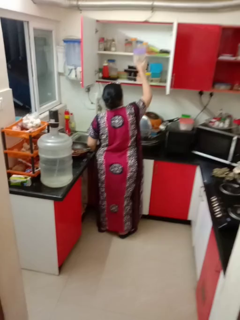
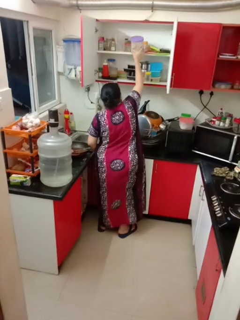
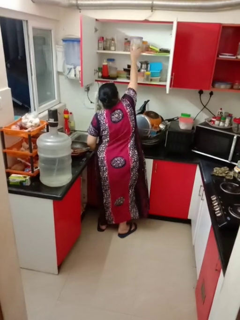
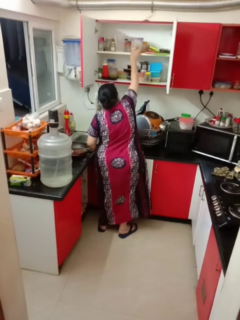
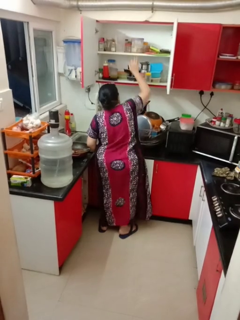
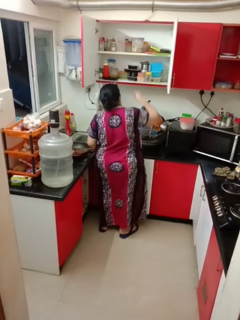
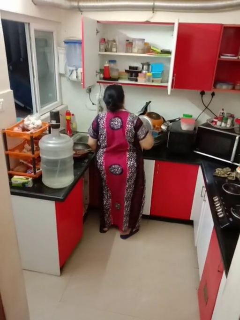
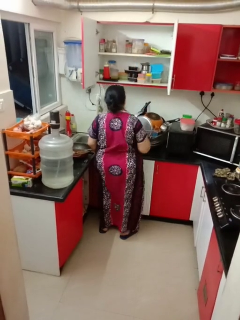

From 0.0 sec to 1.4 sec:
person puts object in cabinet

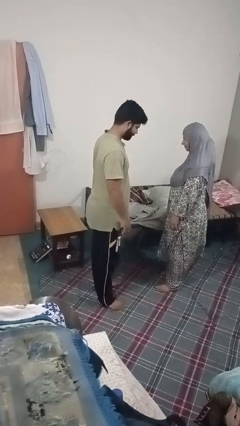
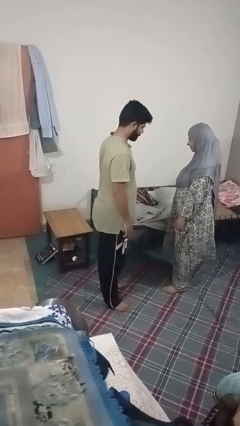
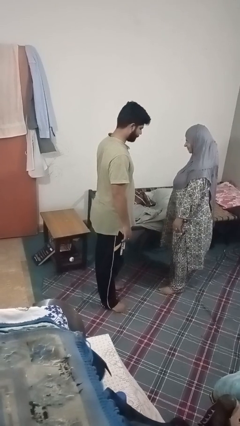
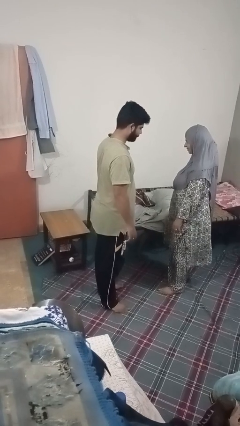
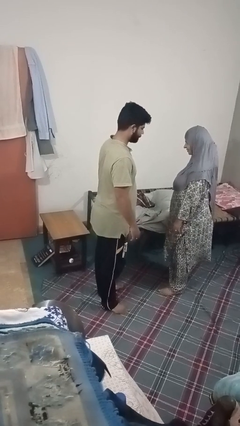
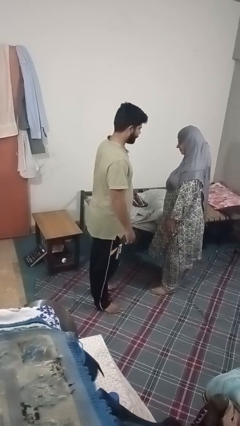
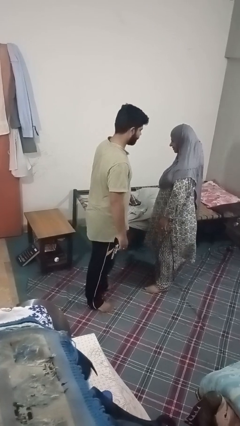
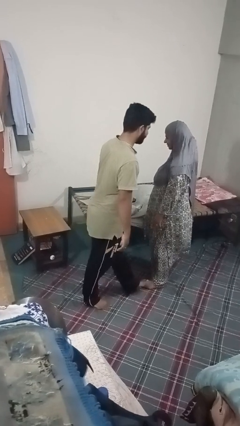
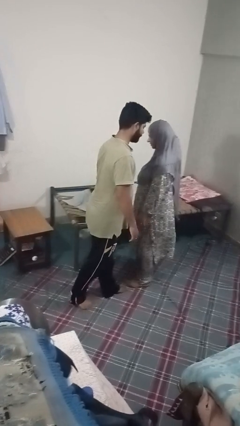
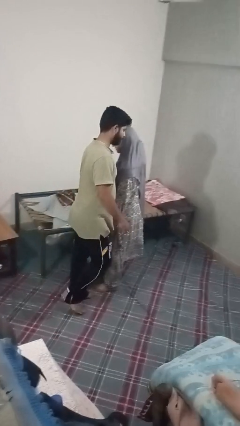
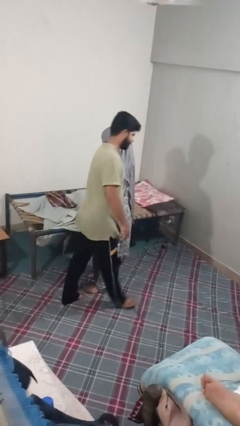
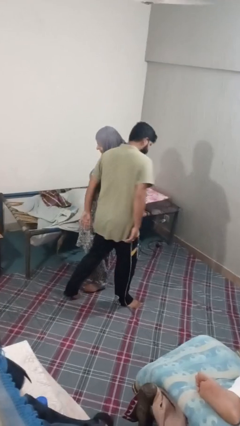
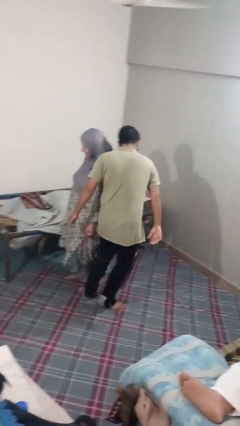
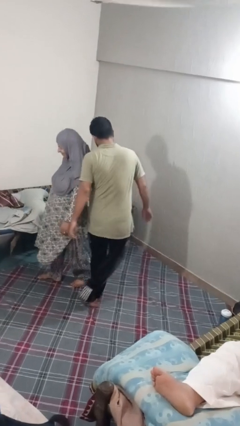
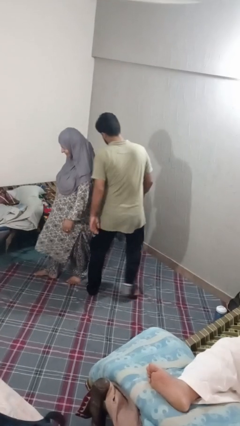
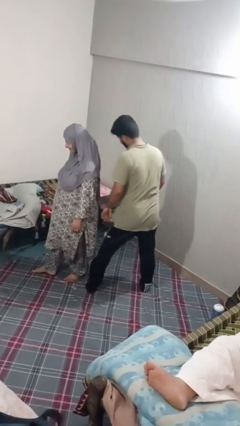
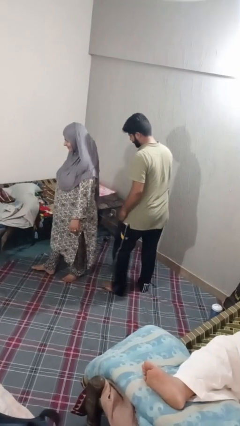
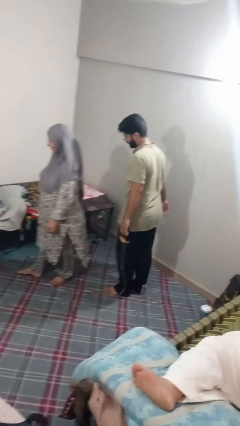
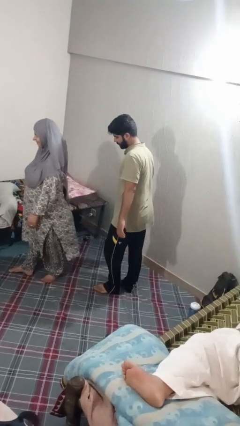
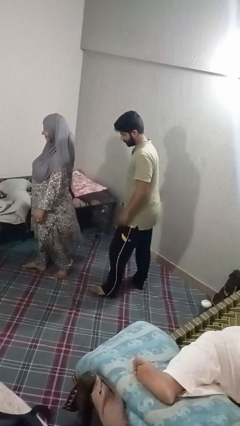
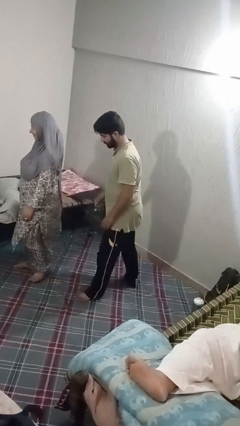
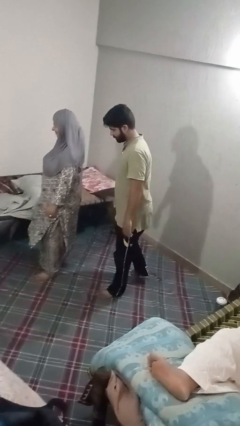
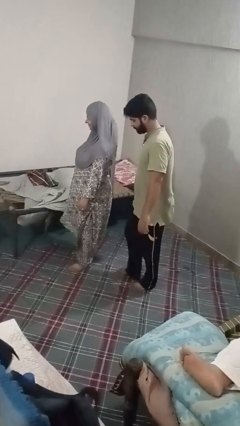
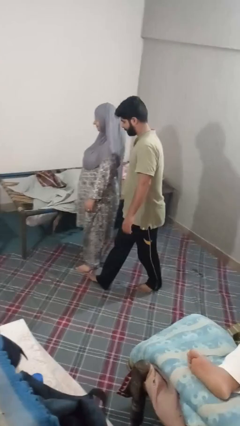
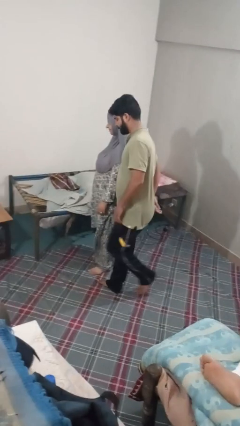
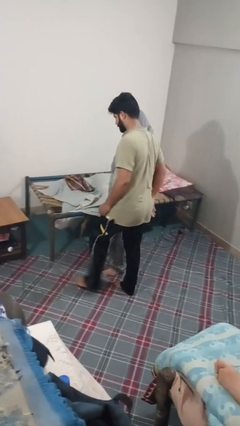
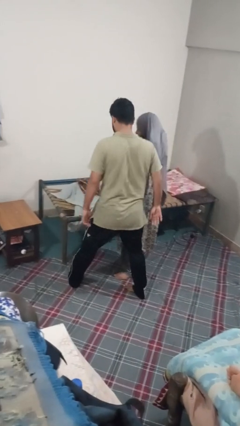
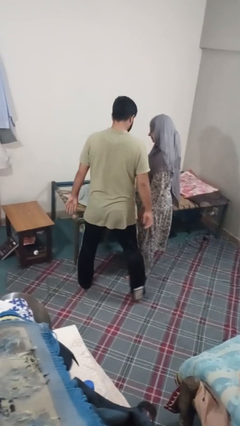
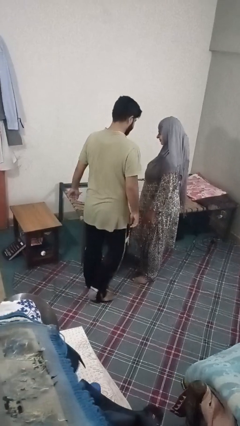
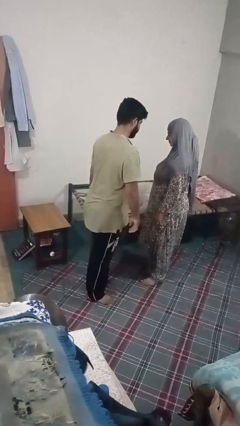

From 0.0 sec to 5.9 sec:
person bumps into person

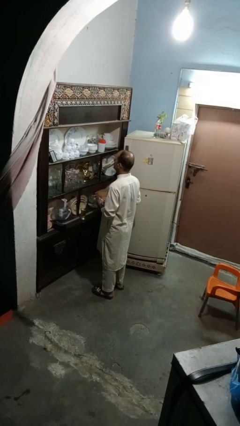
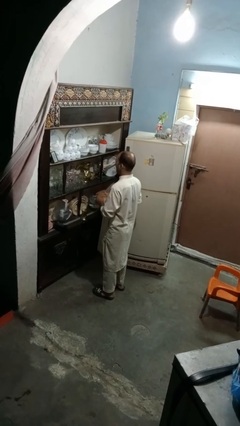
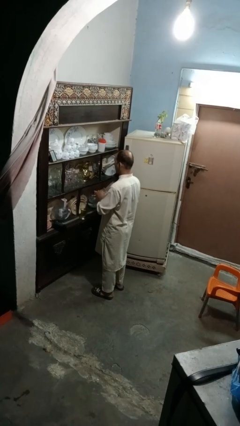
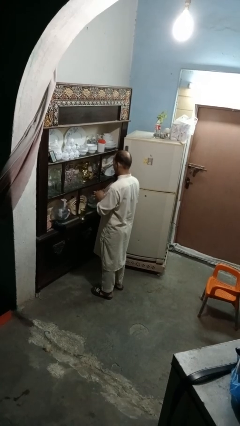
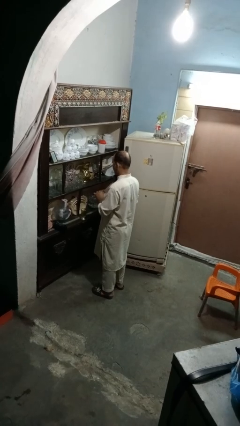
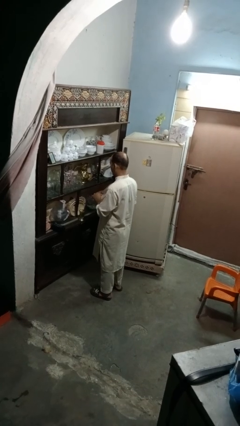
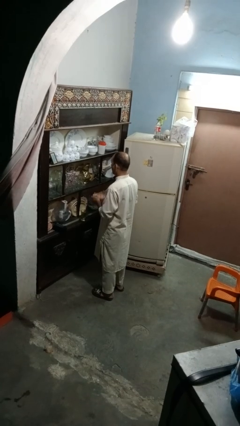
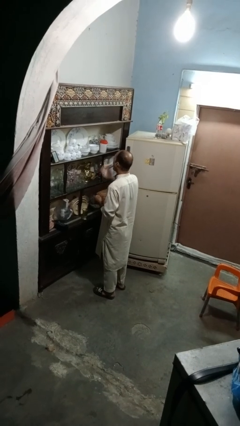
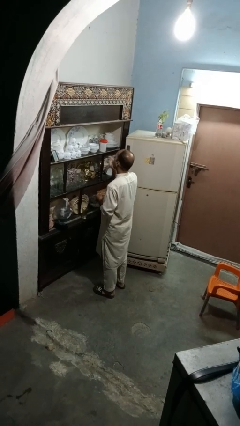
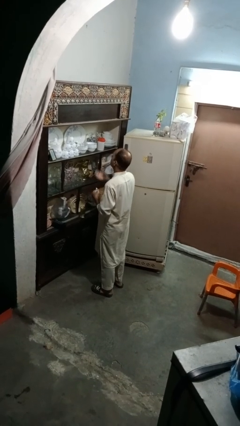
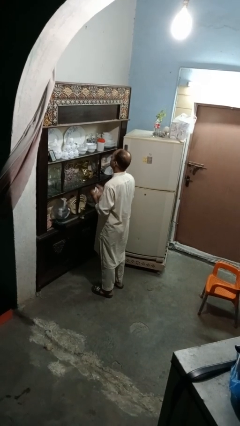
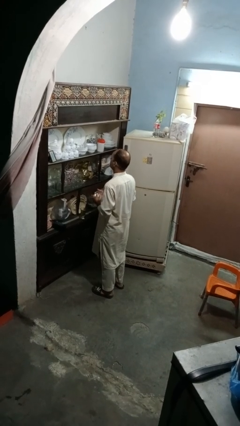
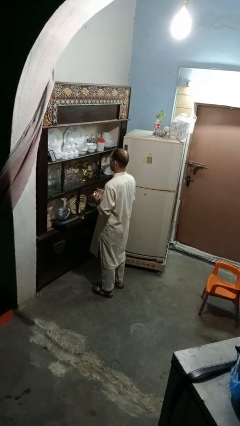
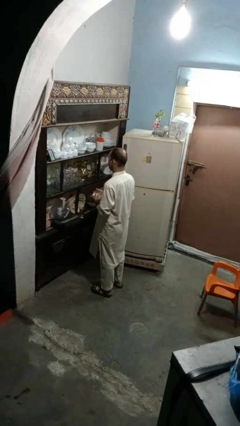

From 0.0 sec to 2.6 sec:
person takes medicine pills

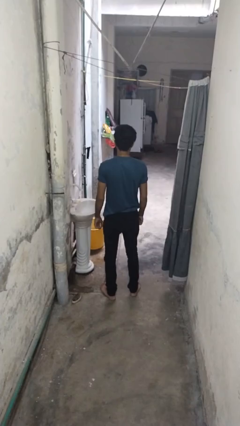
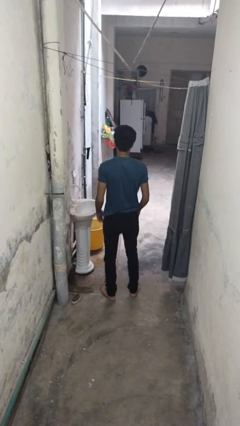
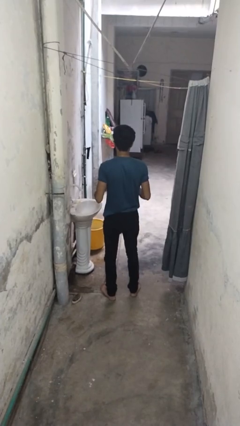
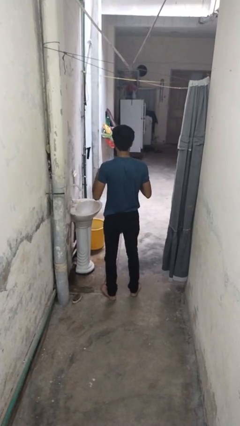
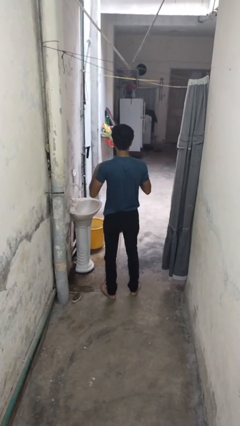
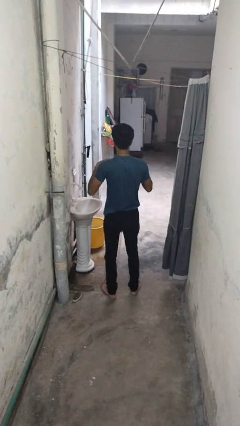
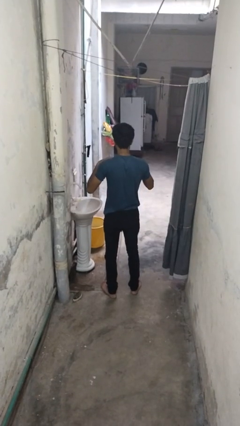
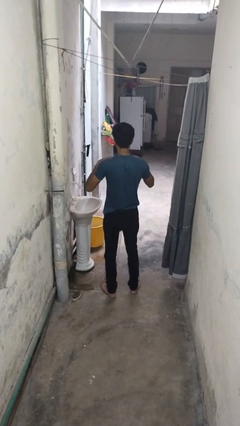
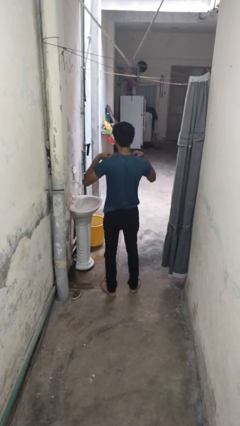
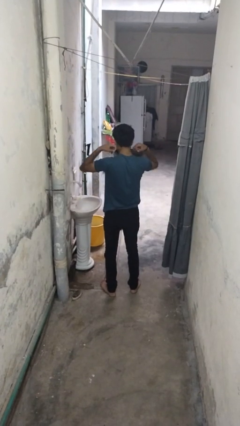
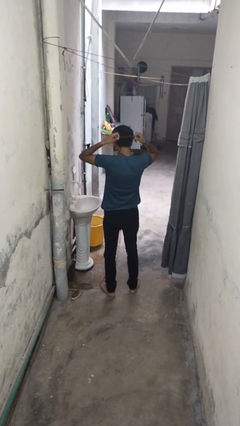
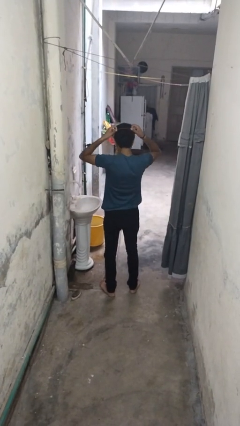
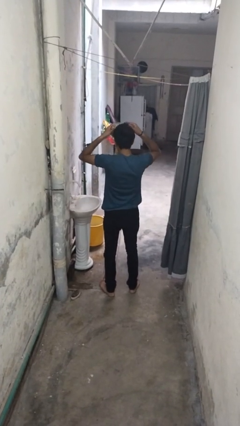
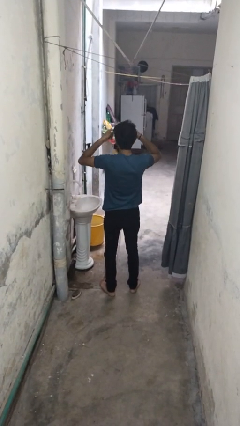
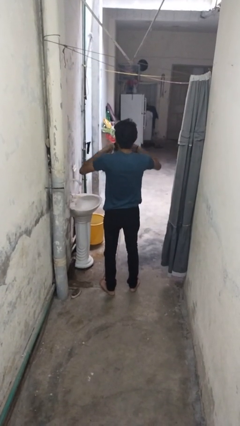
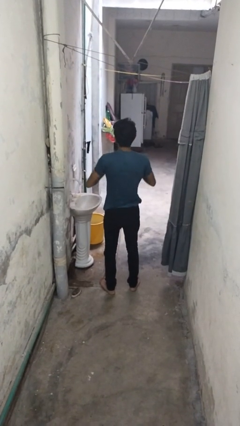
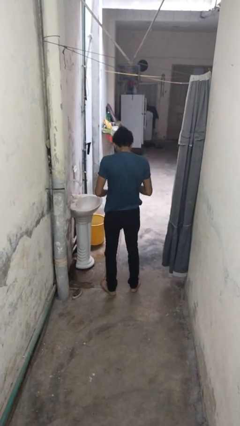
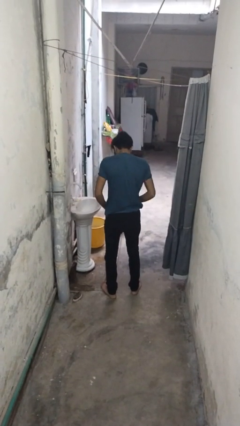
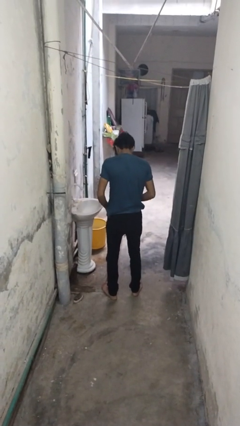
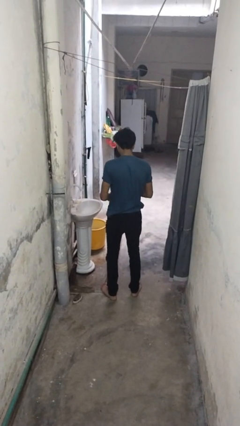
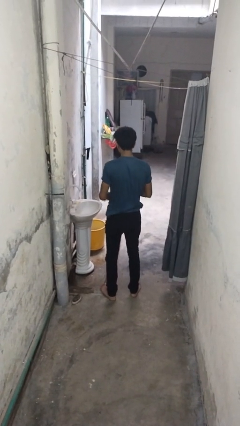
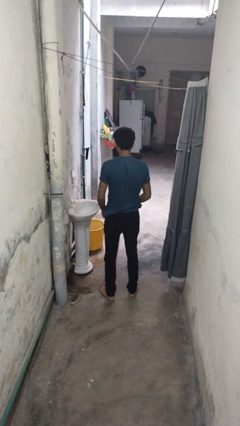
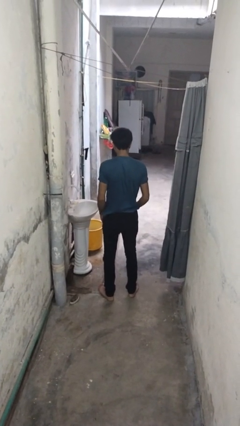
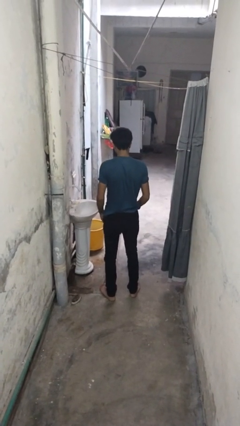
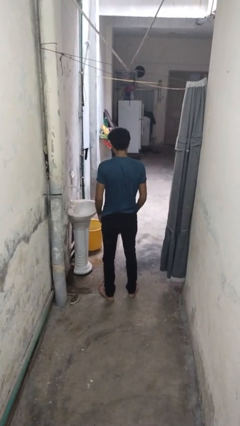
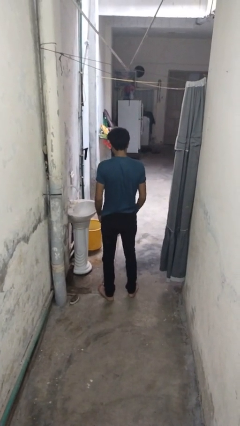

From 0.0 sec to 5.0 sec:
person takes off necklace

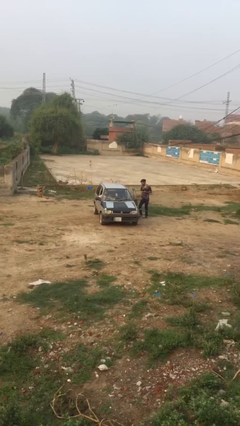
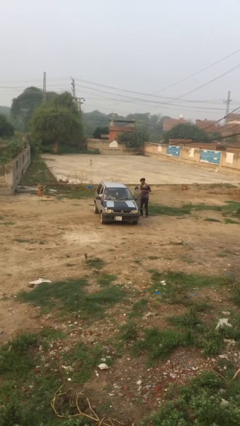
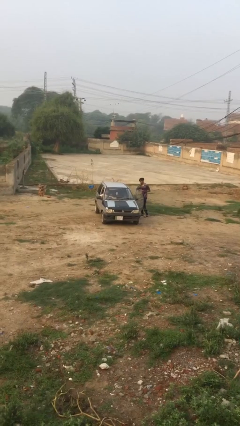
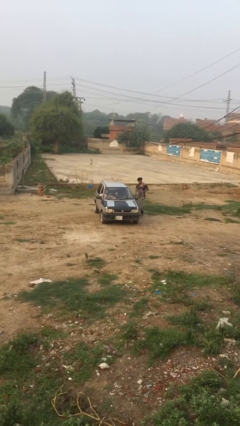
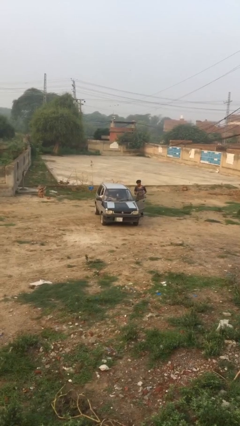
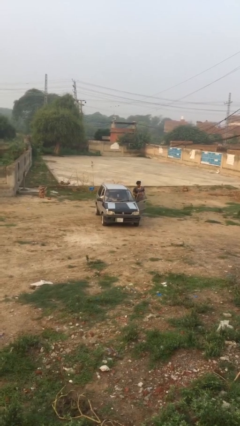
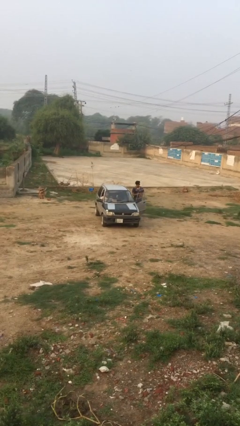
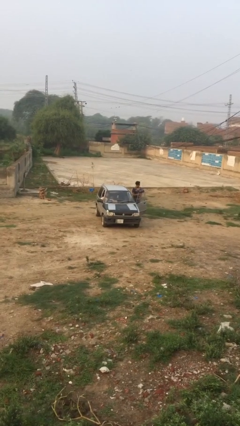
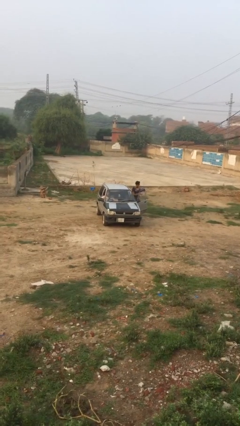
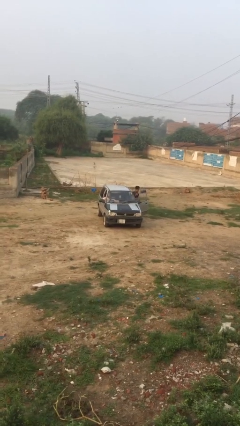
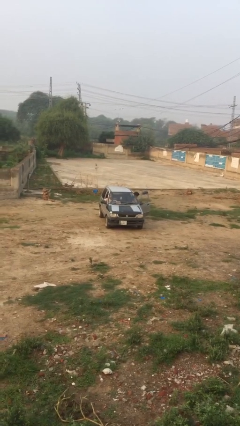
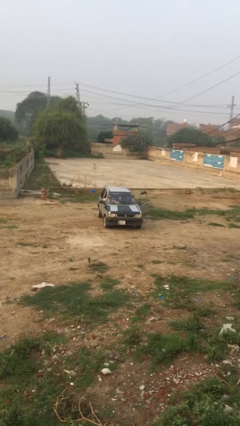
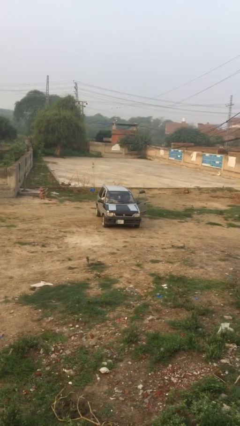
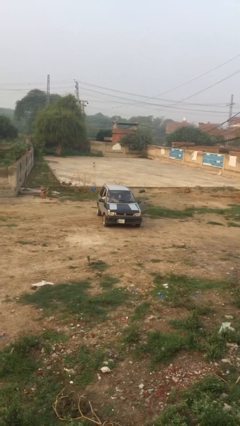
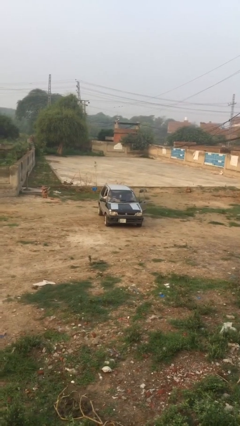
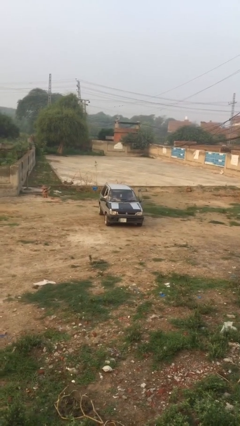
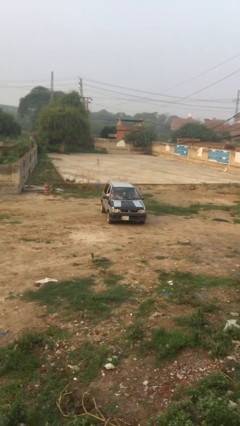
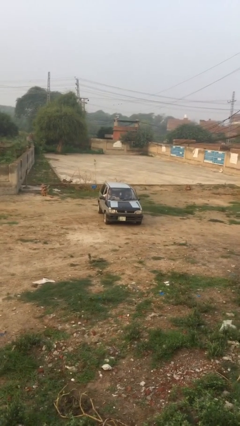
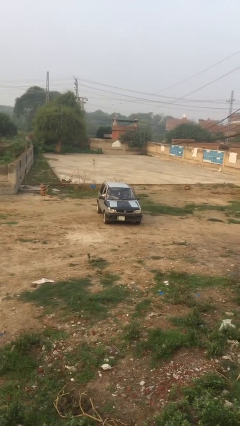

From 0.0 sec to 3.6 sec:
car picks up person
